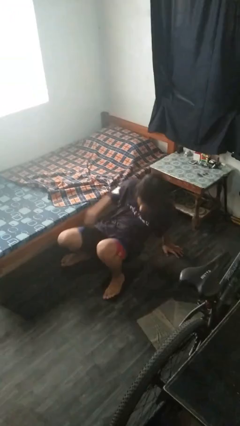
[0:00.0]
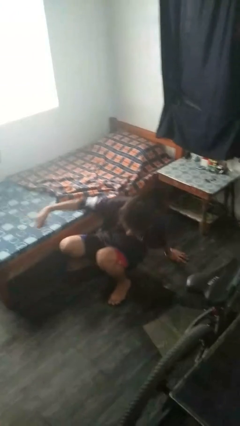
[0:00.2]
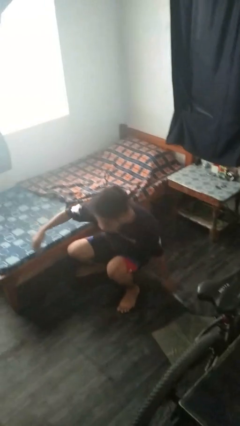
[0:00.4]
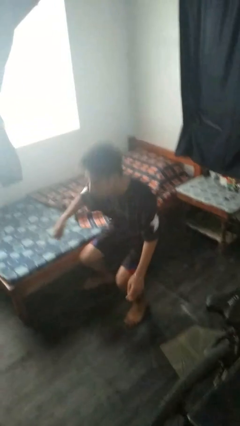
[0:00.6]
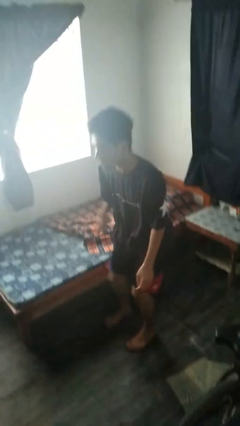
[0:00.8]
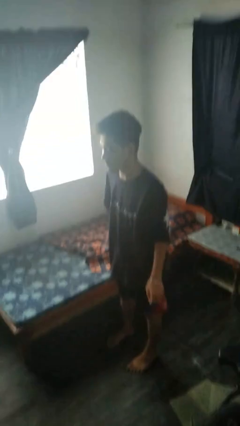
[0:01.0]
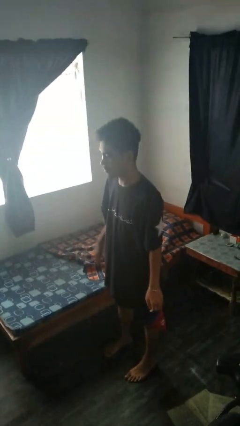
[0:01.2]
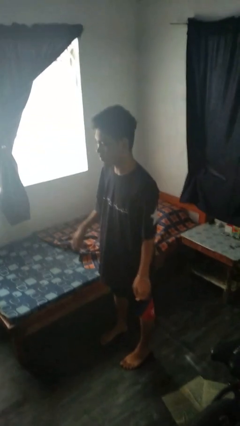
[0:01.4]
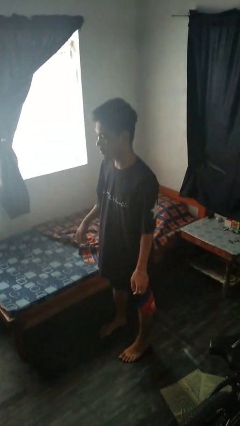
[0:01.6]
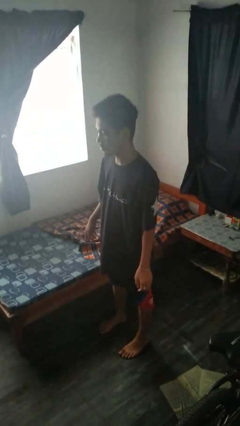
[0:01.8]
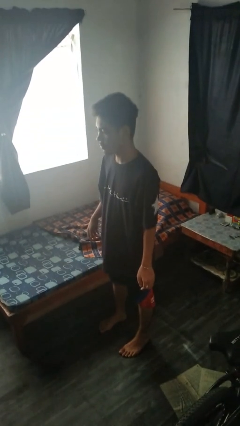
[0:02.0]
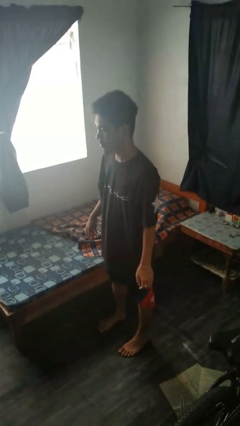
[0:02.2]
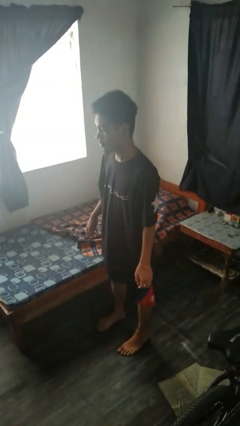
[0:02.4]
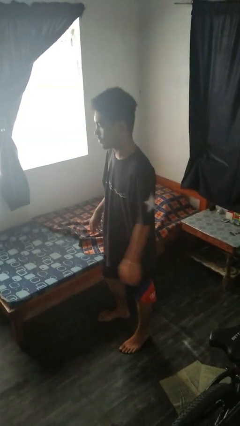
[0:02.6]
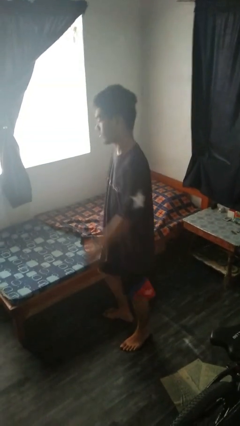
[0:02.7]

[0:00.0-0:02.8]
person stands up from floor

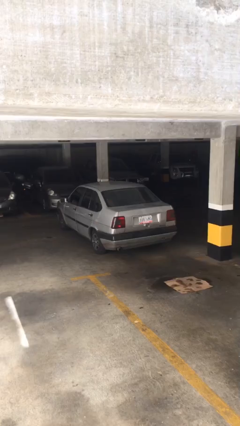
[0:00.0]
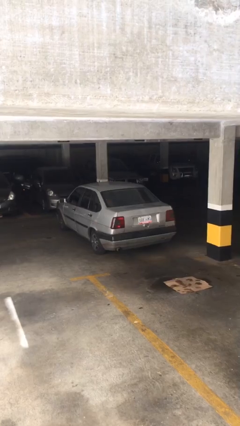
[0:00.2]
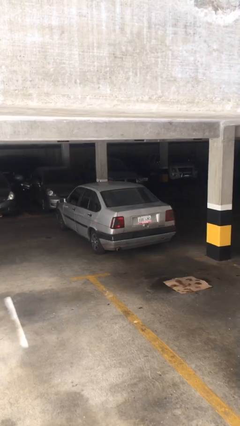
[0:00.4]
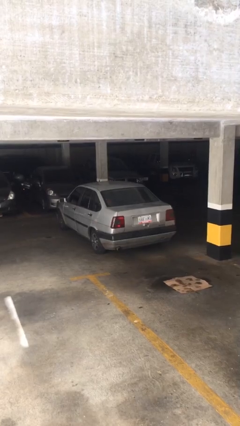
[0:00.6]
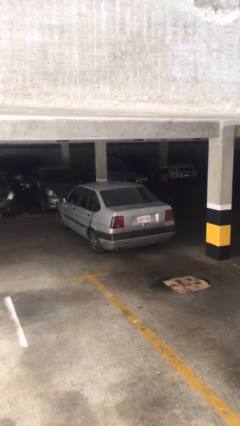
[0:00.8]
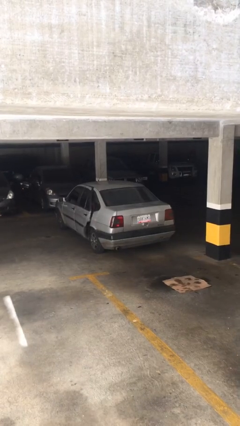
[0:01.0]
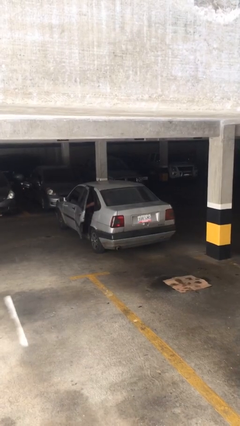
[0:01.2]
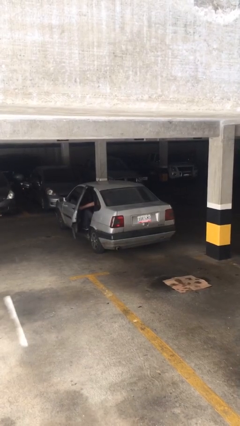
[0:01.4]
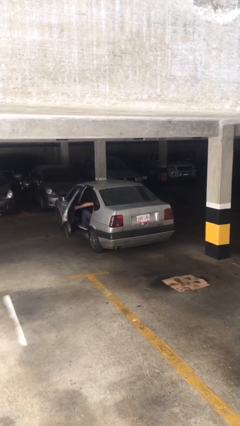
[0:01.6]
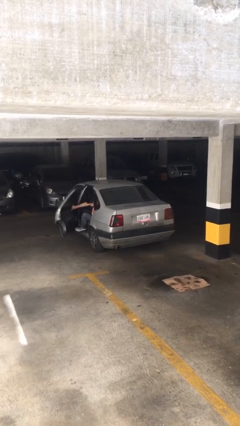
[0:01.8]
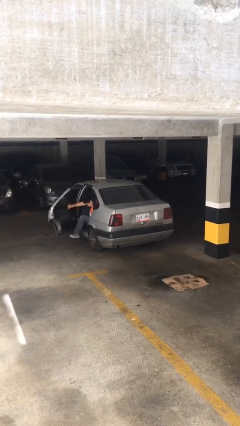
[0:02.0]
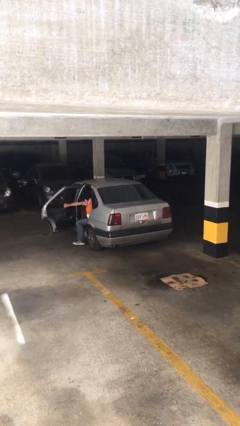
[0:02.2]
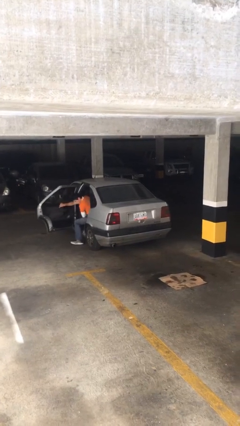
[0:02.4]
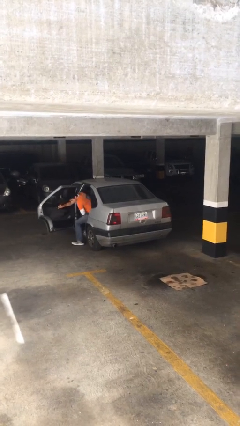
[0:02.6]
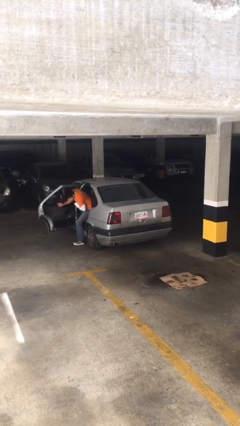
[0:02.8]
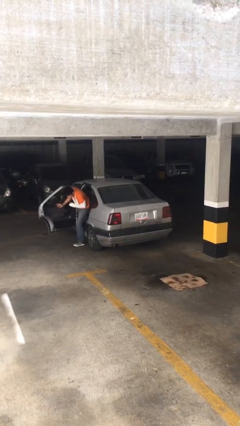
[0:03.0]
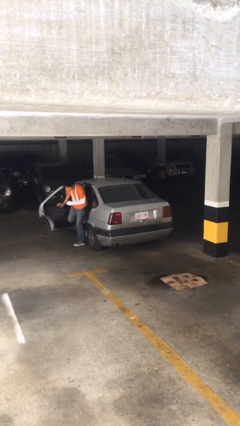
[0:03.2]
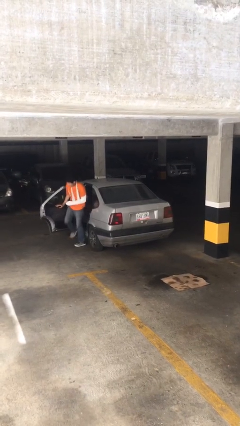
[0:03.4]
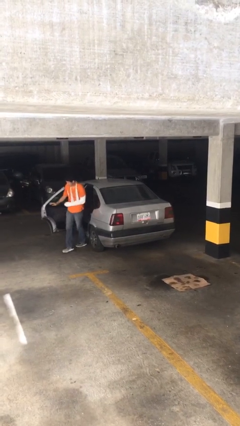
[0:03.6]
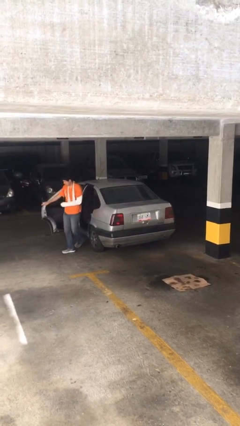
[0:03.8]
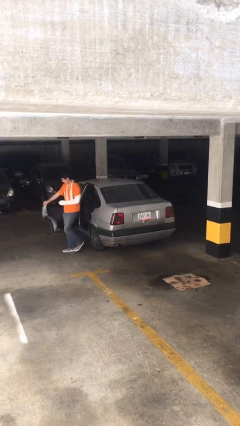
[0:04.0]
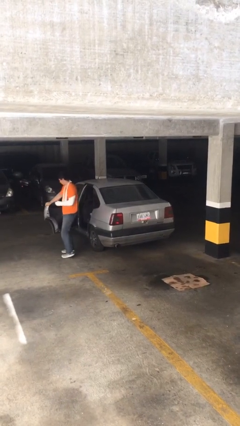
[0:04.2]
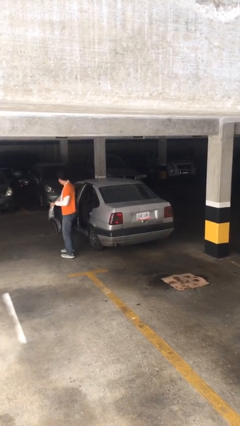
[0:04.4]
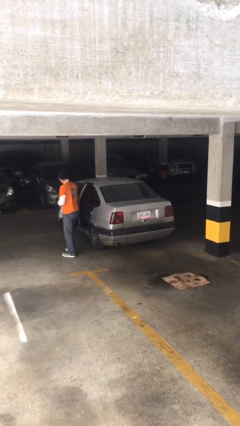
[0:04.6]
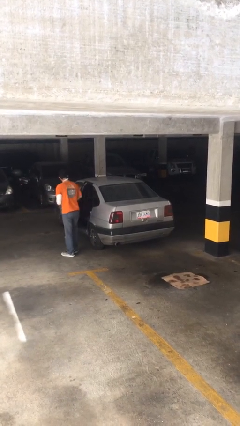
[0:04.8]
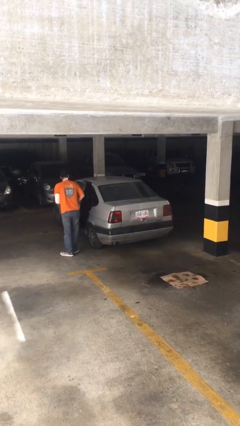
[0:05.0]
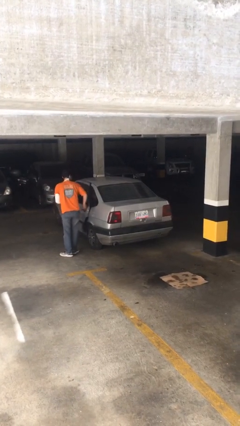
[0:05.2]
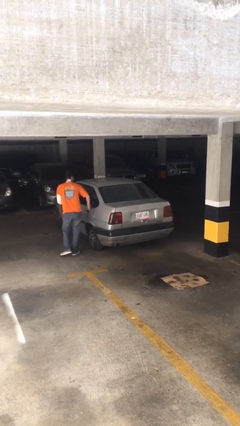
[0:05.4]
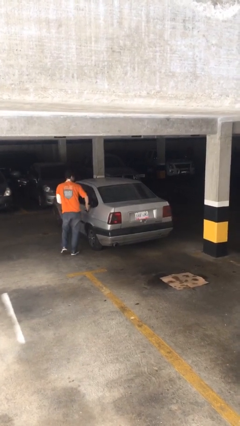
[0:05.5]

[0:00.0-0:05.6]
car drops off person

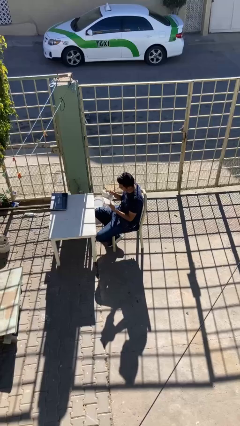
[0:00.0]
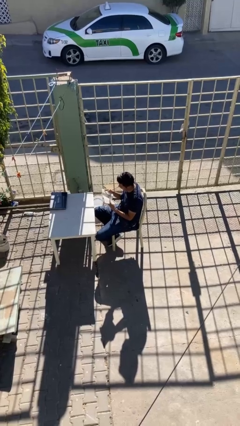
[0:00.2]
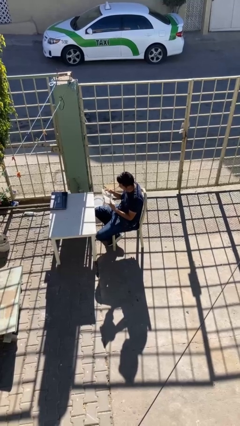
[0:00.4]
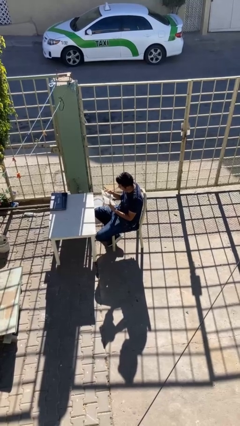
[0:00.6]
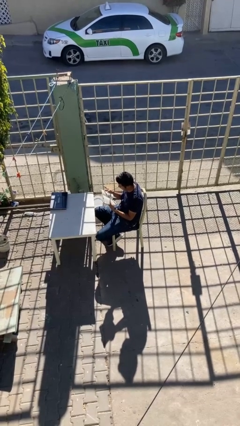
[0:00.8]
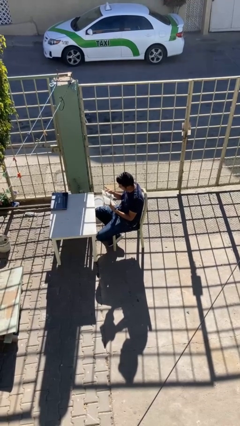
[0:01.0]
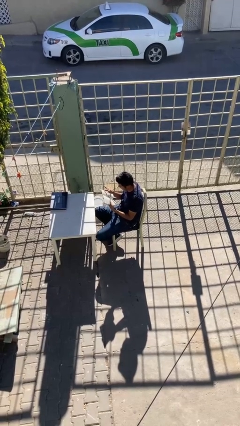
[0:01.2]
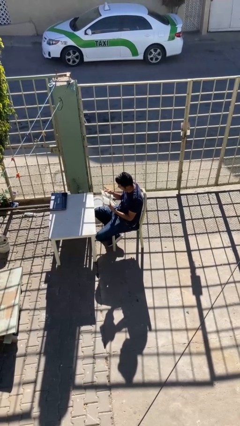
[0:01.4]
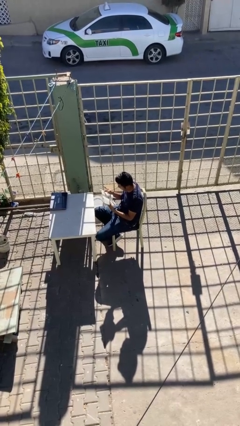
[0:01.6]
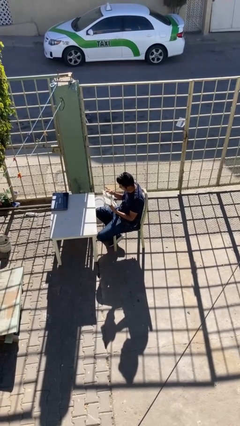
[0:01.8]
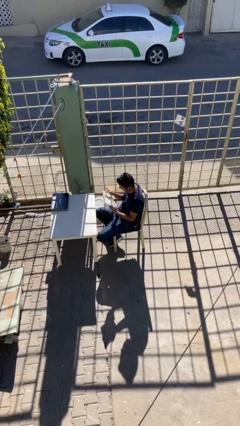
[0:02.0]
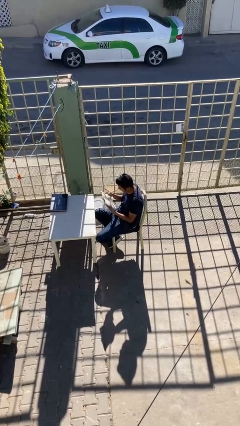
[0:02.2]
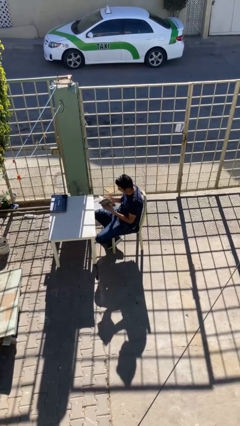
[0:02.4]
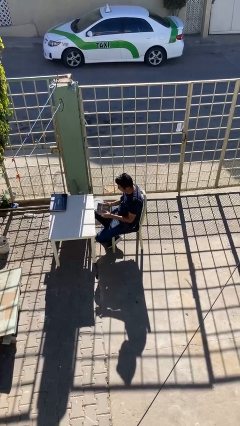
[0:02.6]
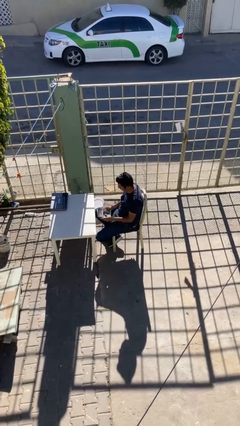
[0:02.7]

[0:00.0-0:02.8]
person reads document

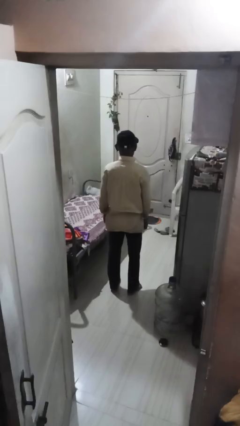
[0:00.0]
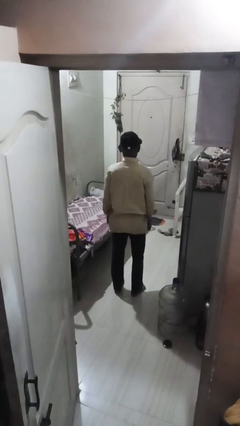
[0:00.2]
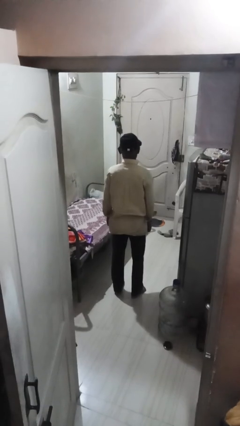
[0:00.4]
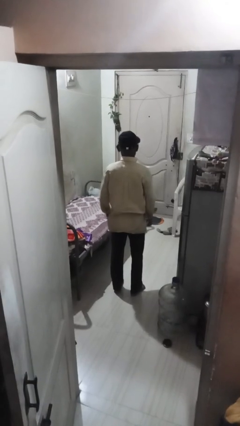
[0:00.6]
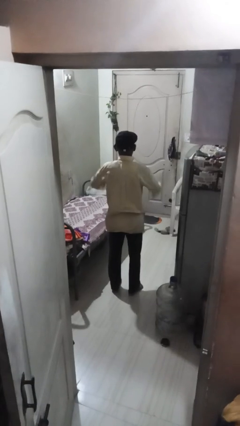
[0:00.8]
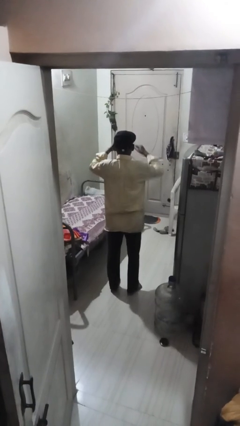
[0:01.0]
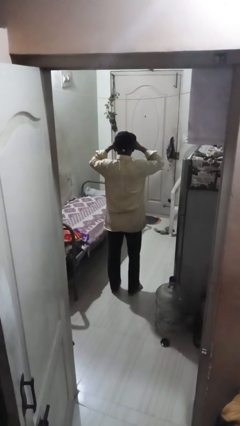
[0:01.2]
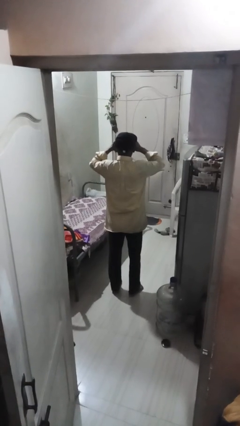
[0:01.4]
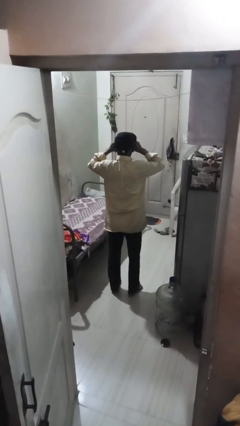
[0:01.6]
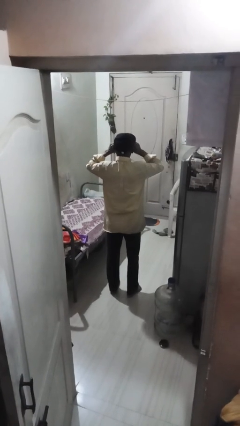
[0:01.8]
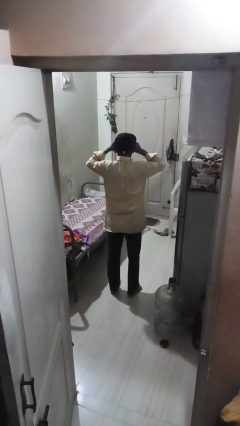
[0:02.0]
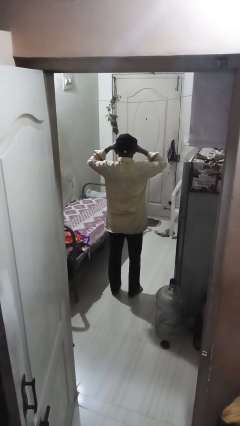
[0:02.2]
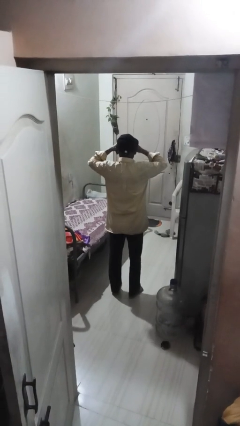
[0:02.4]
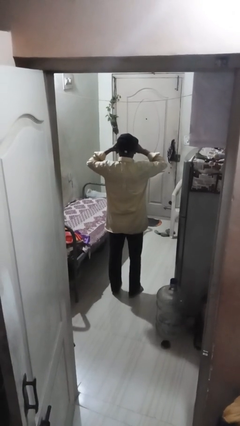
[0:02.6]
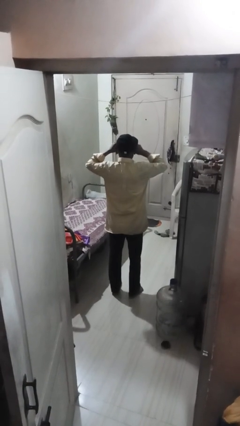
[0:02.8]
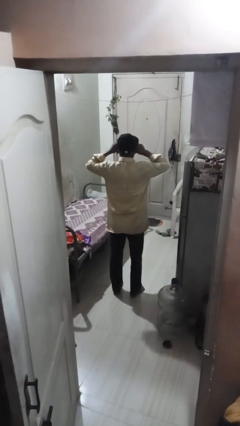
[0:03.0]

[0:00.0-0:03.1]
person rubs eyes

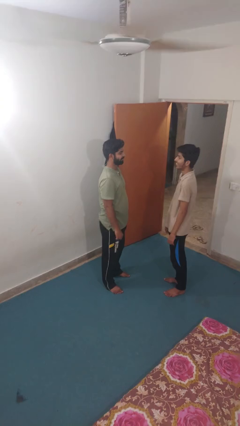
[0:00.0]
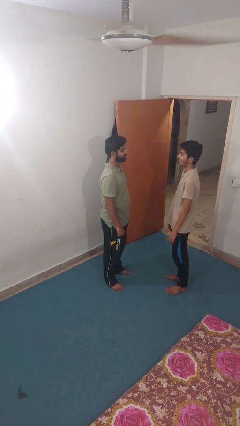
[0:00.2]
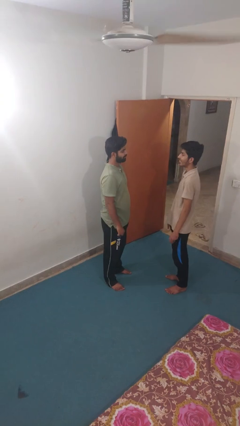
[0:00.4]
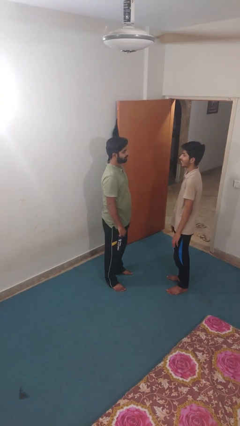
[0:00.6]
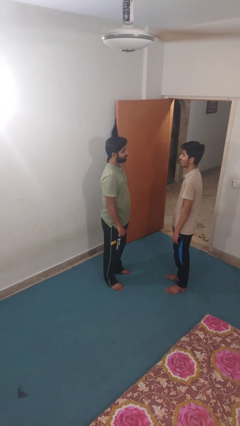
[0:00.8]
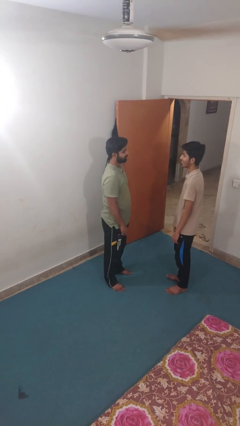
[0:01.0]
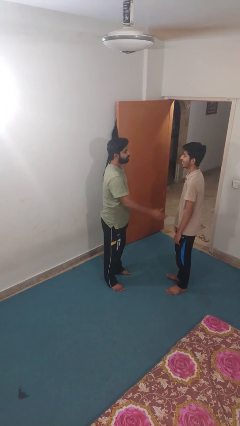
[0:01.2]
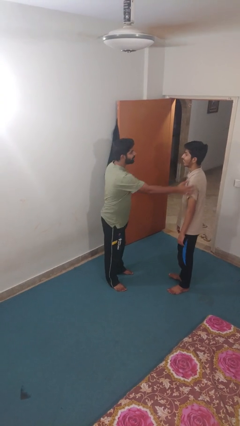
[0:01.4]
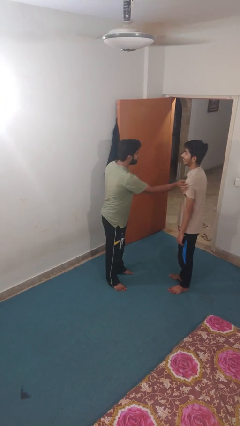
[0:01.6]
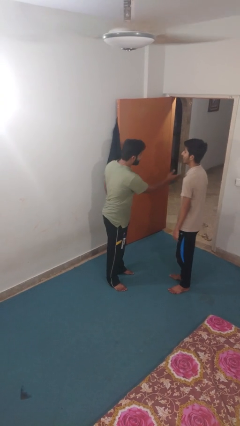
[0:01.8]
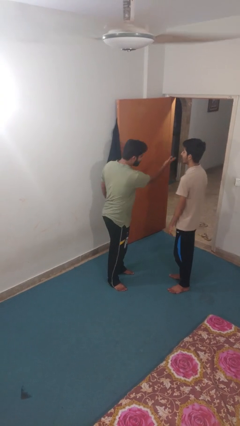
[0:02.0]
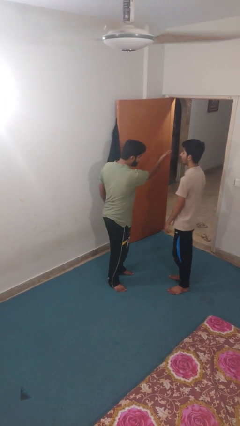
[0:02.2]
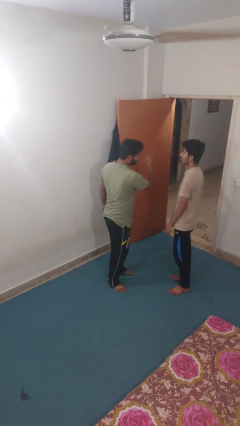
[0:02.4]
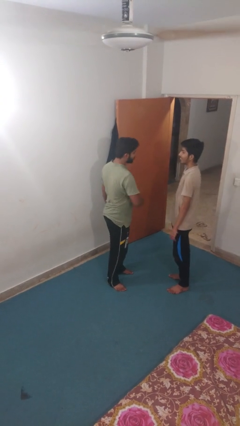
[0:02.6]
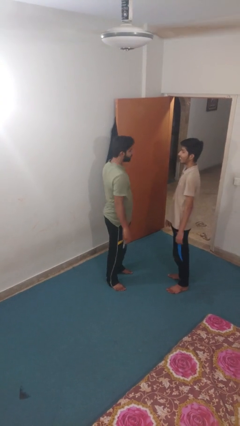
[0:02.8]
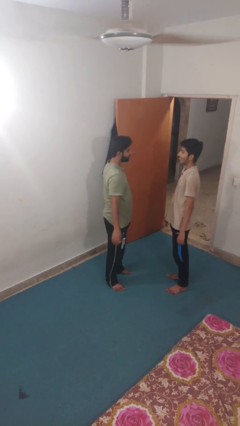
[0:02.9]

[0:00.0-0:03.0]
person shoves person

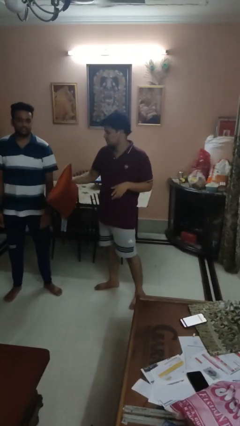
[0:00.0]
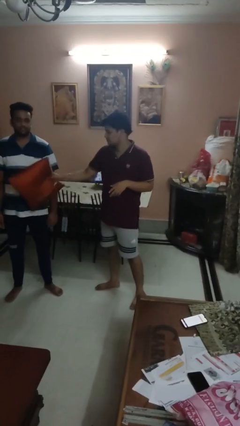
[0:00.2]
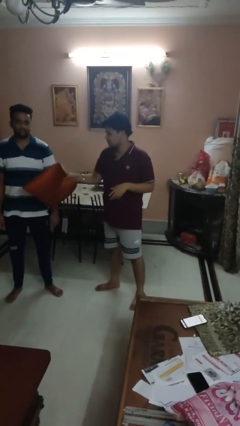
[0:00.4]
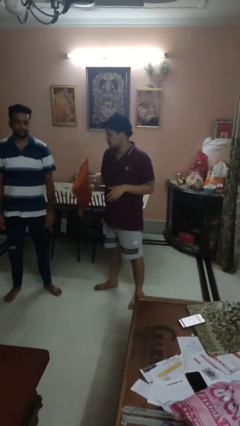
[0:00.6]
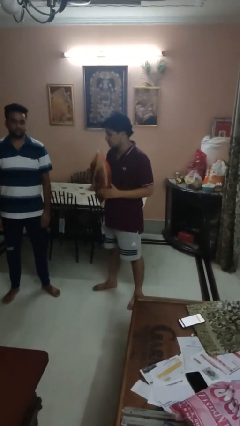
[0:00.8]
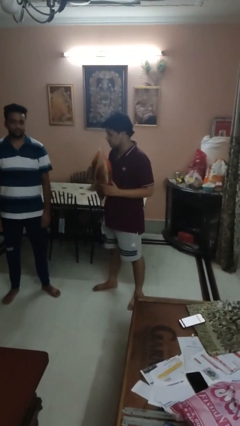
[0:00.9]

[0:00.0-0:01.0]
person hits person with pillow
